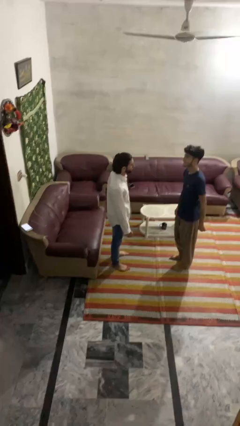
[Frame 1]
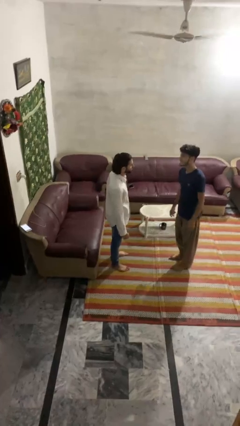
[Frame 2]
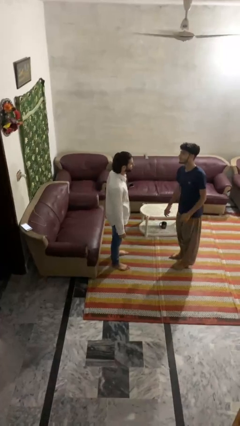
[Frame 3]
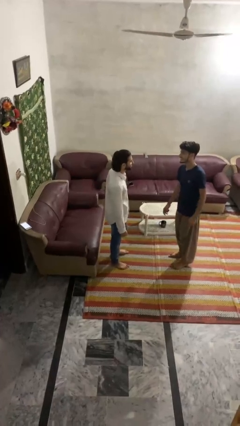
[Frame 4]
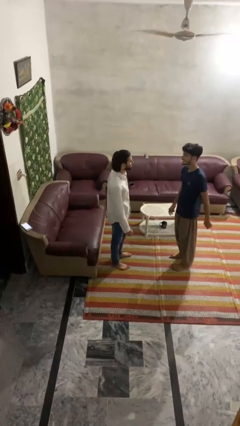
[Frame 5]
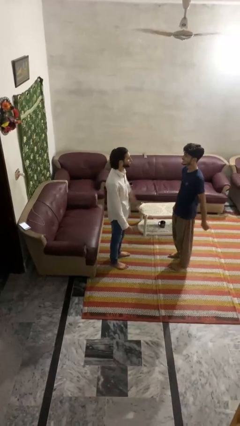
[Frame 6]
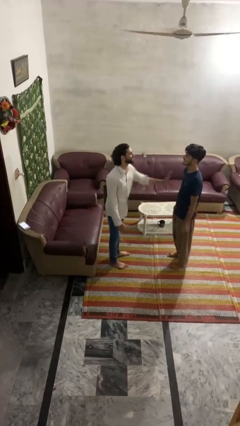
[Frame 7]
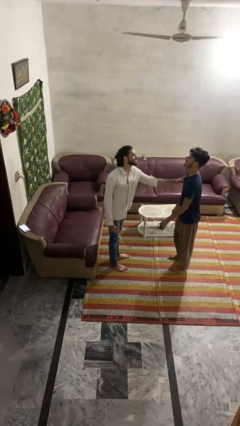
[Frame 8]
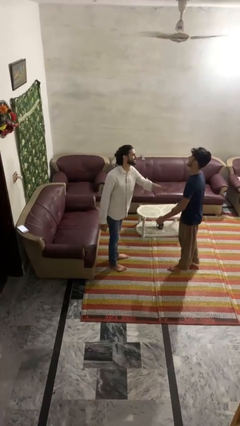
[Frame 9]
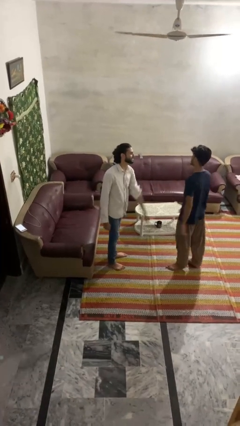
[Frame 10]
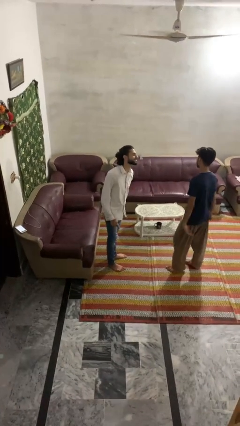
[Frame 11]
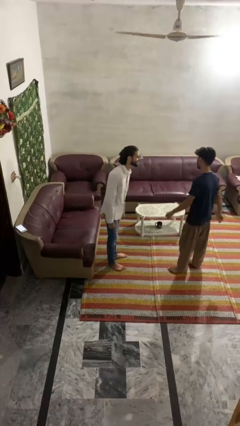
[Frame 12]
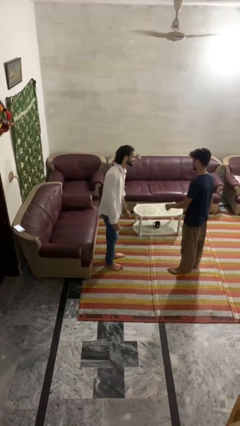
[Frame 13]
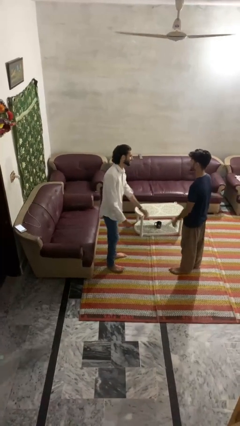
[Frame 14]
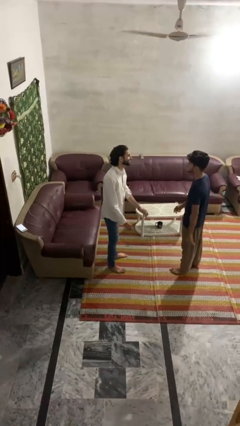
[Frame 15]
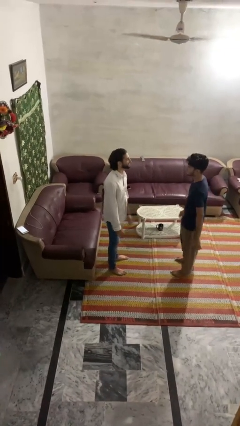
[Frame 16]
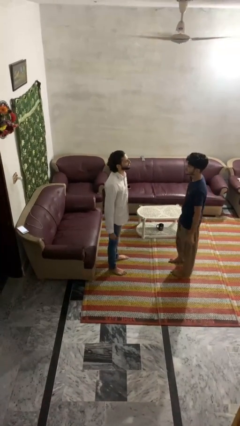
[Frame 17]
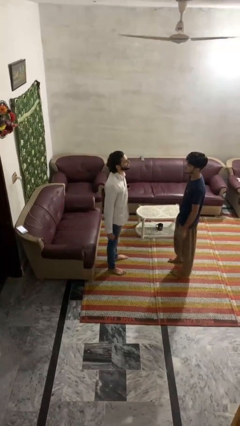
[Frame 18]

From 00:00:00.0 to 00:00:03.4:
person shoves person

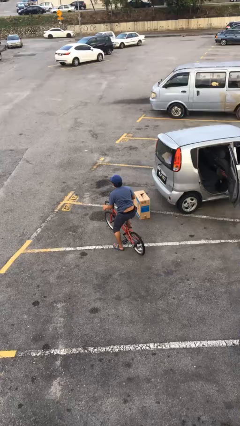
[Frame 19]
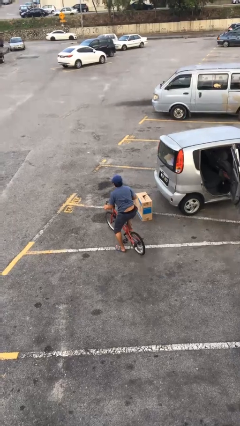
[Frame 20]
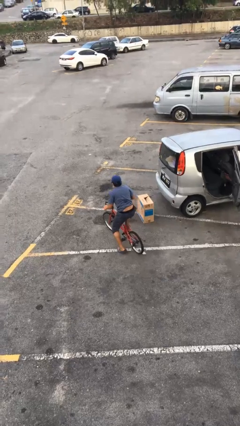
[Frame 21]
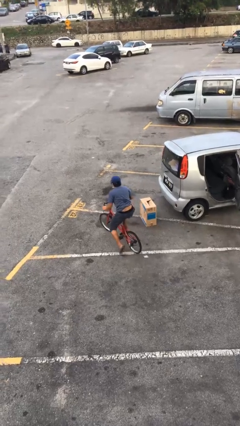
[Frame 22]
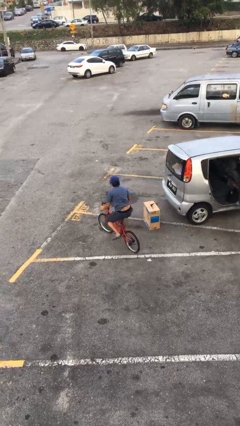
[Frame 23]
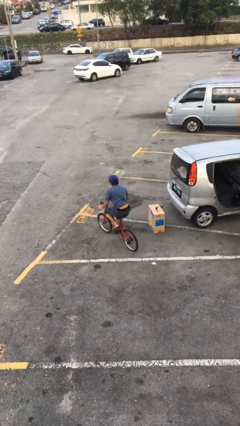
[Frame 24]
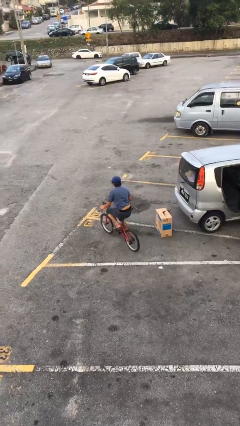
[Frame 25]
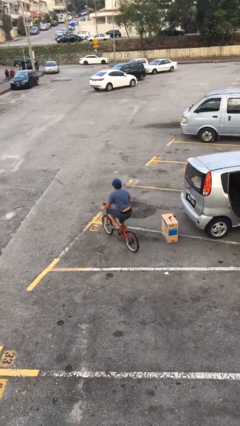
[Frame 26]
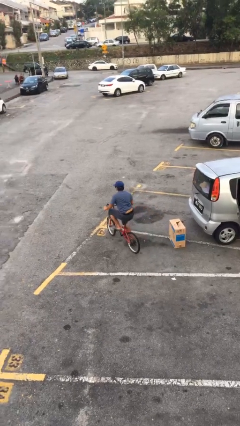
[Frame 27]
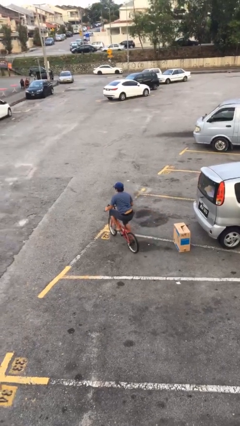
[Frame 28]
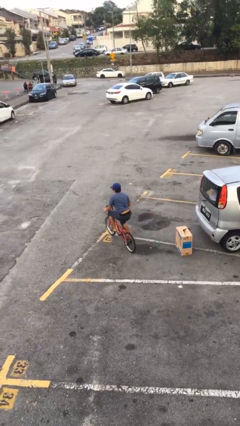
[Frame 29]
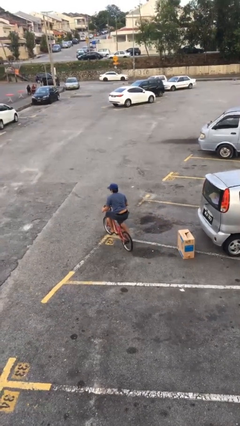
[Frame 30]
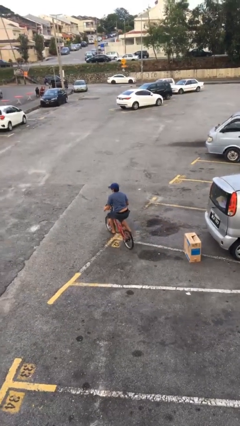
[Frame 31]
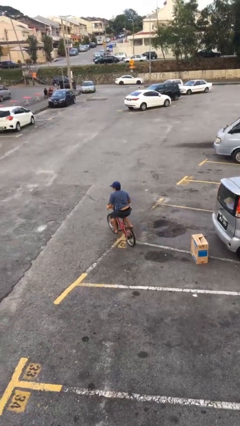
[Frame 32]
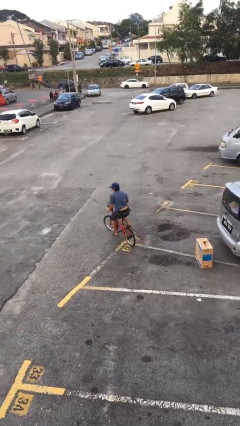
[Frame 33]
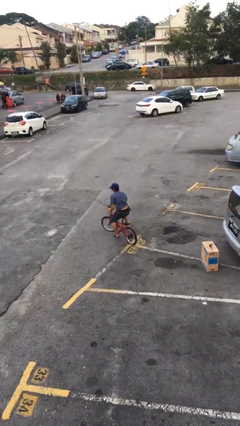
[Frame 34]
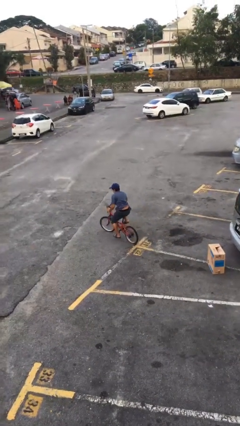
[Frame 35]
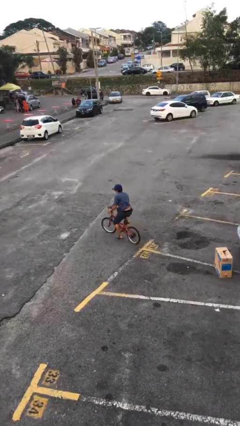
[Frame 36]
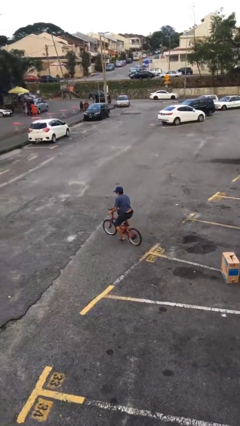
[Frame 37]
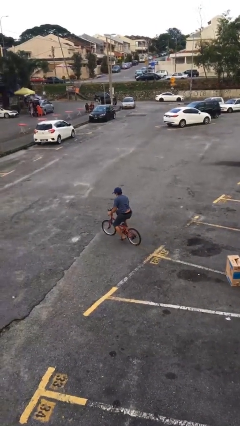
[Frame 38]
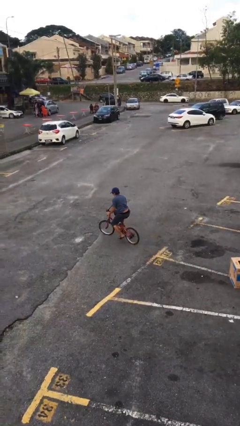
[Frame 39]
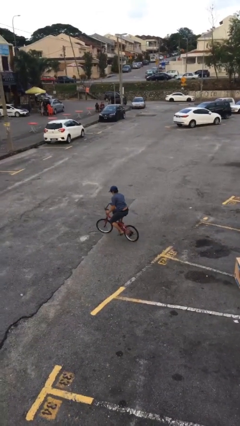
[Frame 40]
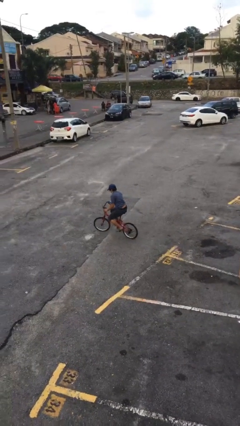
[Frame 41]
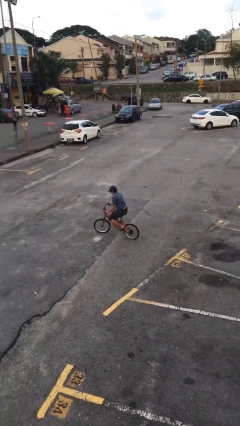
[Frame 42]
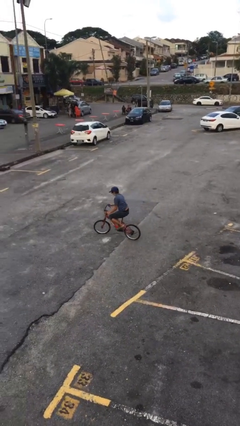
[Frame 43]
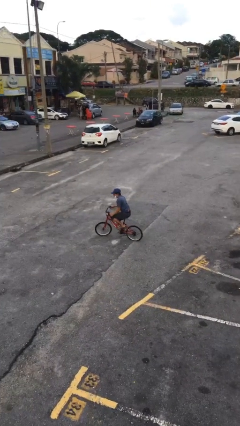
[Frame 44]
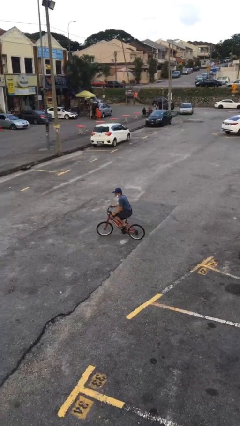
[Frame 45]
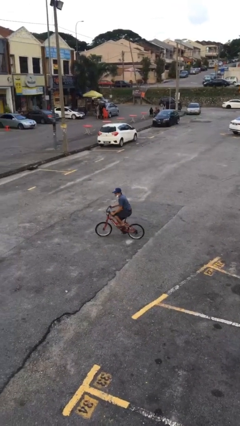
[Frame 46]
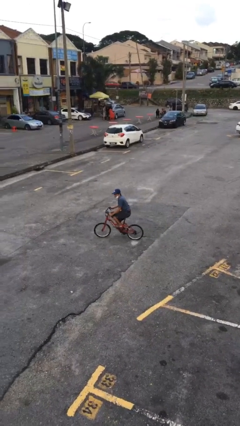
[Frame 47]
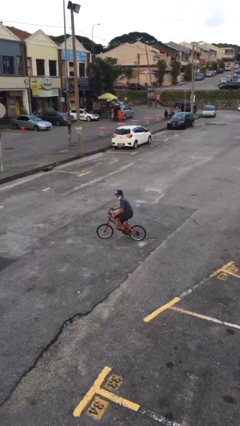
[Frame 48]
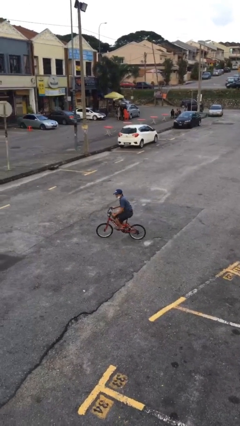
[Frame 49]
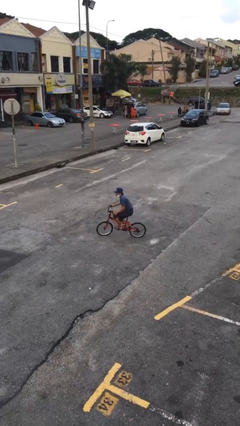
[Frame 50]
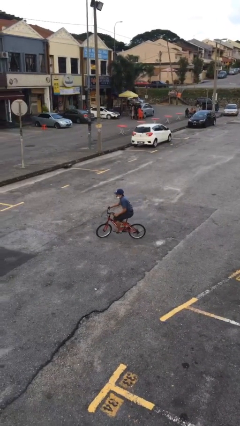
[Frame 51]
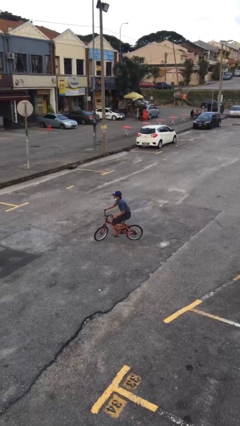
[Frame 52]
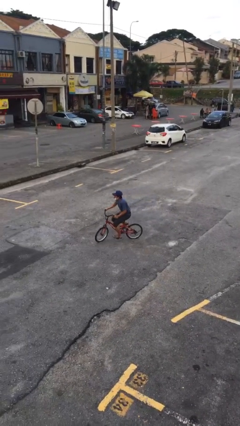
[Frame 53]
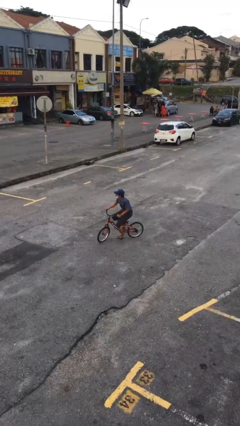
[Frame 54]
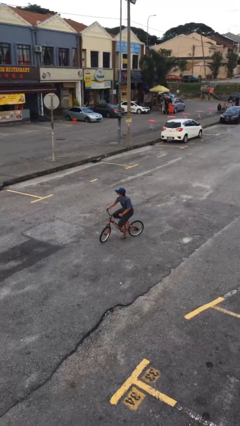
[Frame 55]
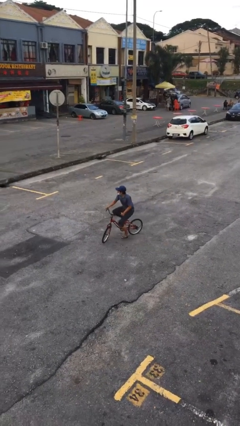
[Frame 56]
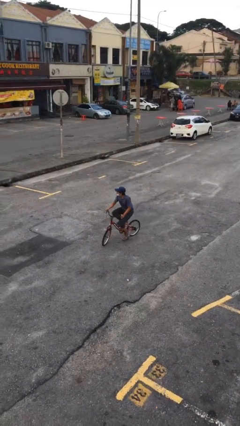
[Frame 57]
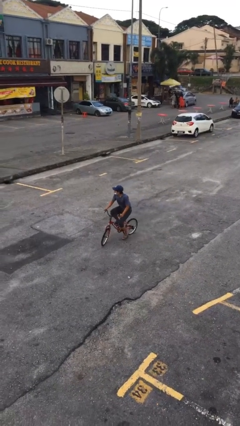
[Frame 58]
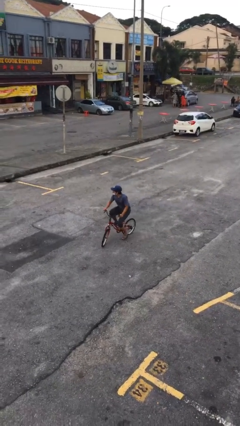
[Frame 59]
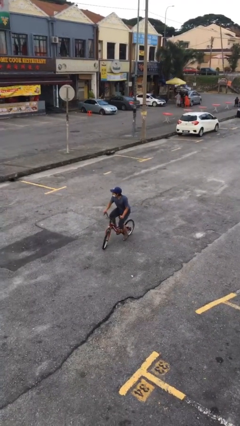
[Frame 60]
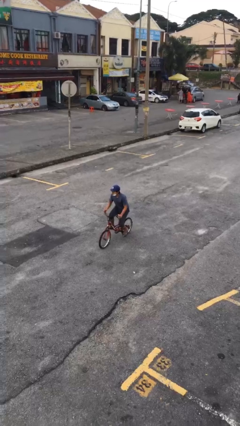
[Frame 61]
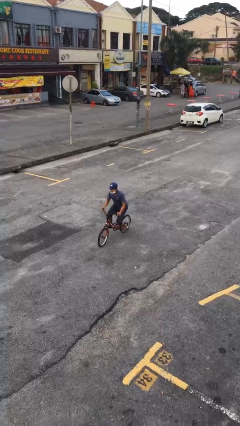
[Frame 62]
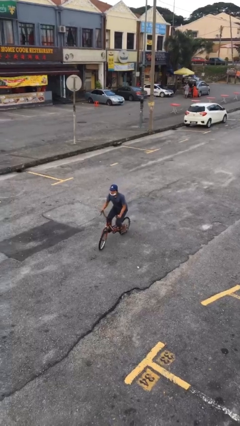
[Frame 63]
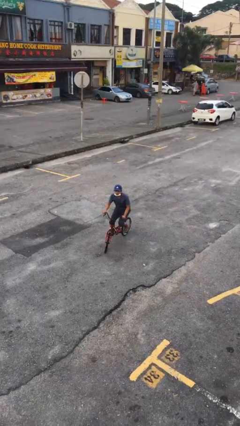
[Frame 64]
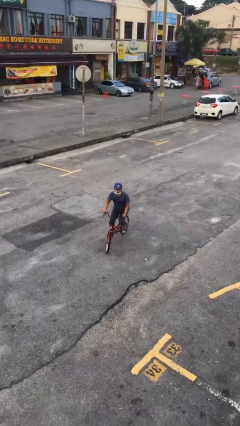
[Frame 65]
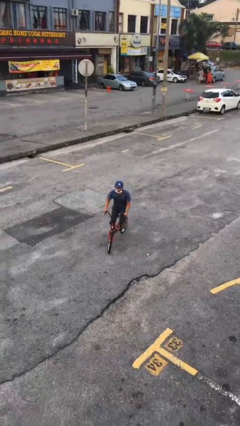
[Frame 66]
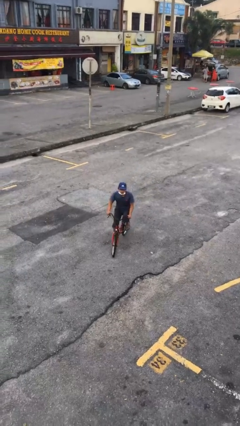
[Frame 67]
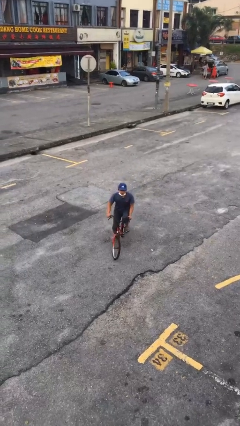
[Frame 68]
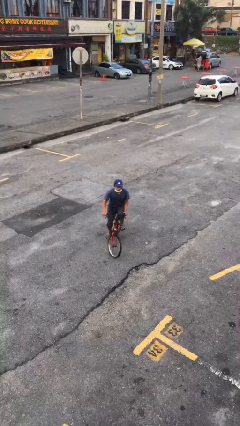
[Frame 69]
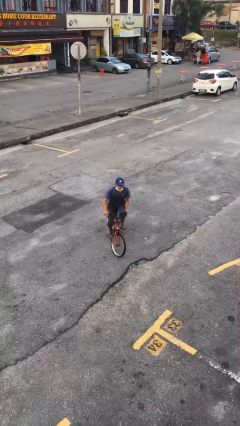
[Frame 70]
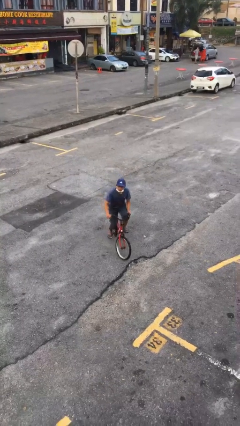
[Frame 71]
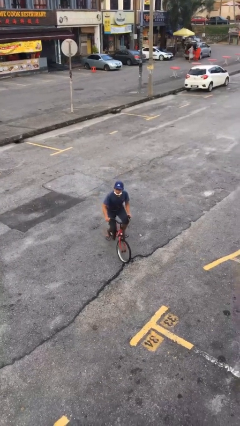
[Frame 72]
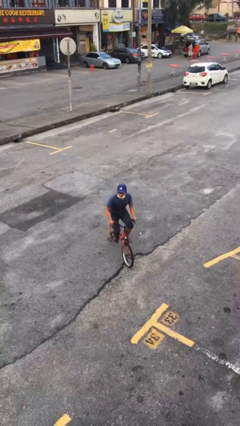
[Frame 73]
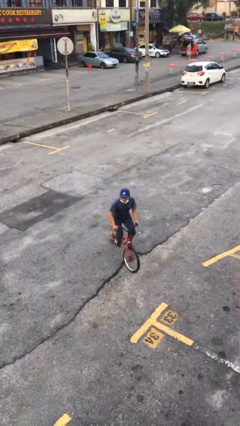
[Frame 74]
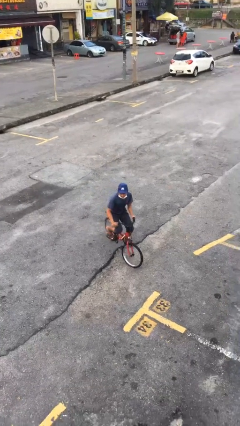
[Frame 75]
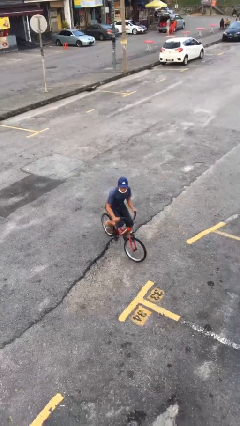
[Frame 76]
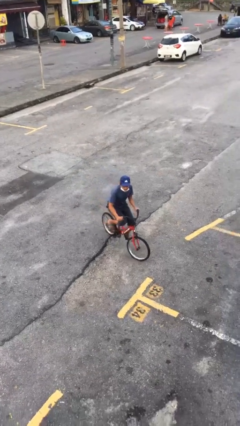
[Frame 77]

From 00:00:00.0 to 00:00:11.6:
person rides bicycle

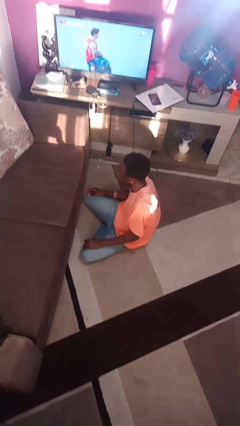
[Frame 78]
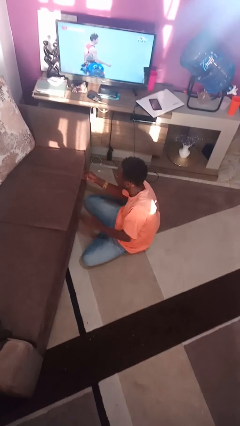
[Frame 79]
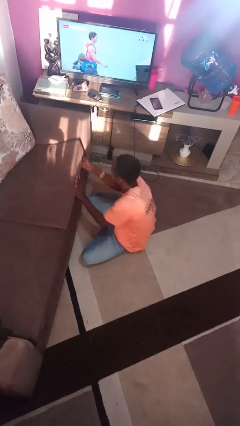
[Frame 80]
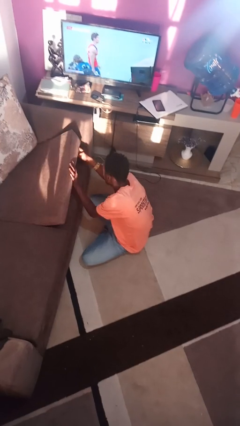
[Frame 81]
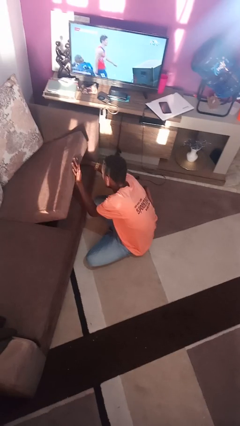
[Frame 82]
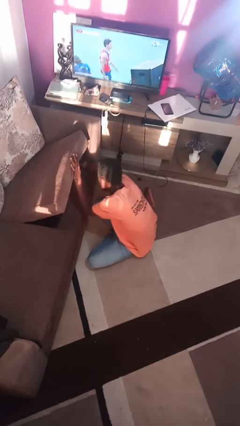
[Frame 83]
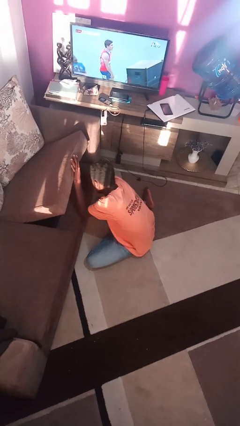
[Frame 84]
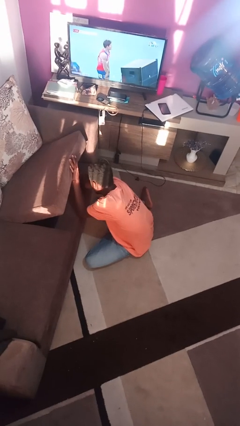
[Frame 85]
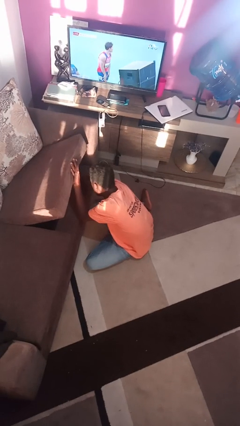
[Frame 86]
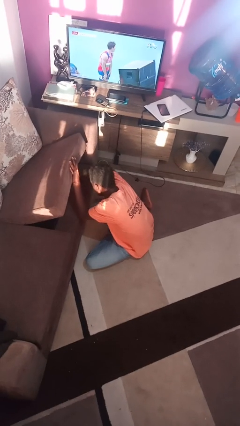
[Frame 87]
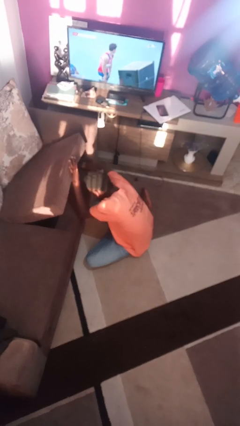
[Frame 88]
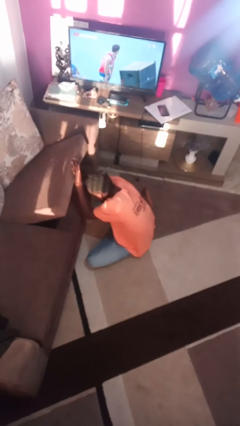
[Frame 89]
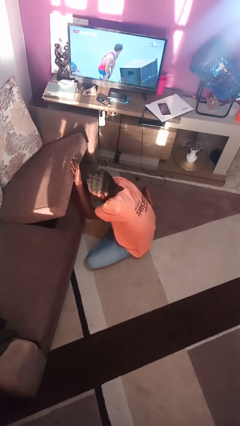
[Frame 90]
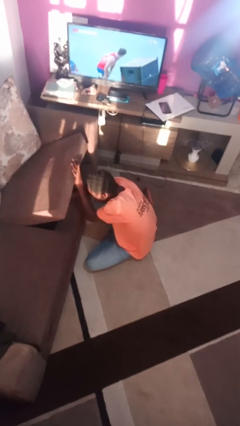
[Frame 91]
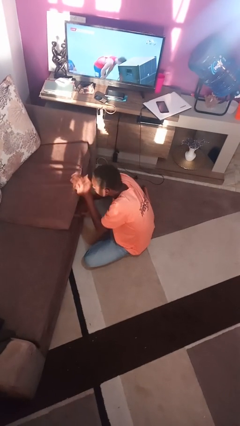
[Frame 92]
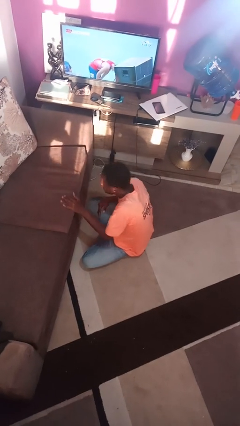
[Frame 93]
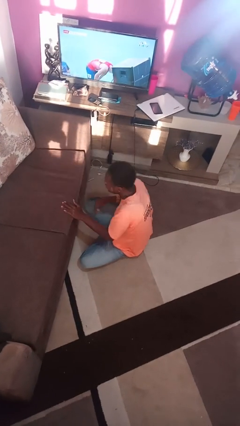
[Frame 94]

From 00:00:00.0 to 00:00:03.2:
person searches under couch
